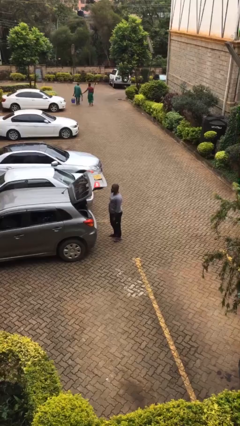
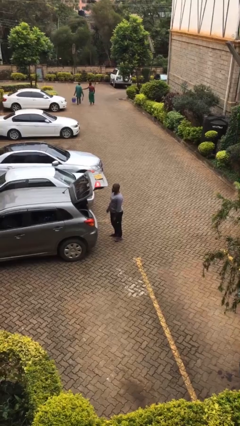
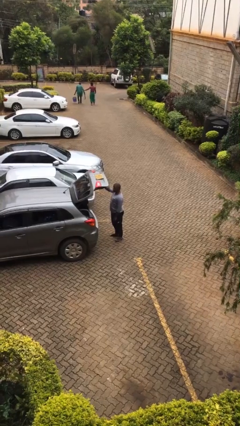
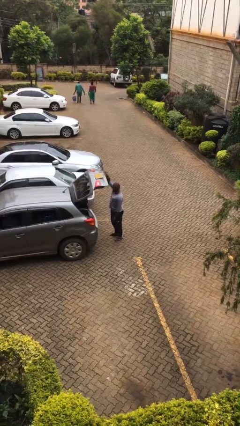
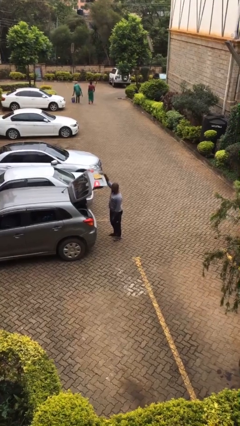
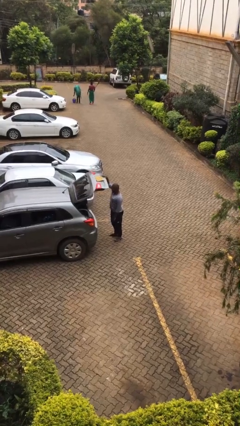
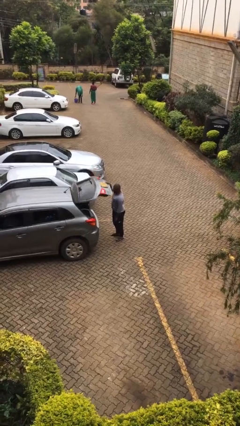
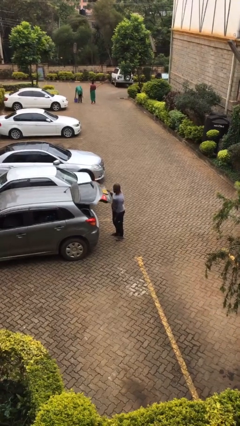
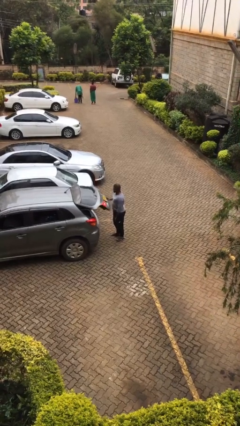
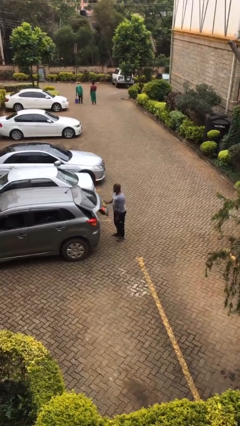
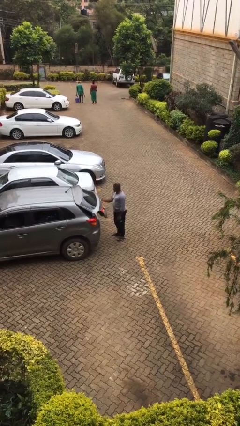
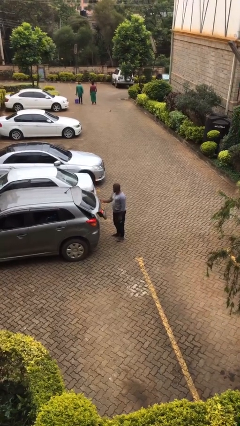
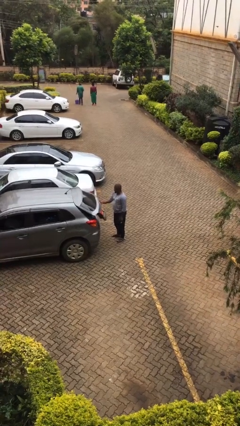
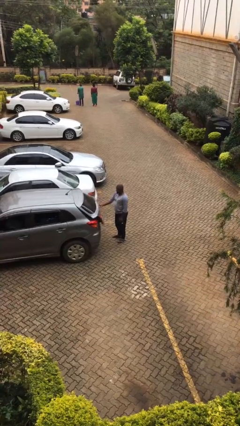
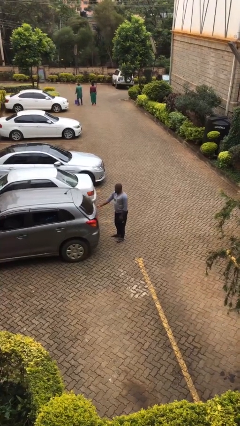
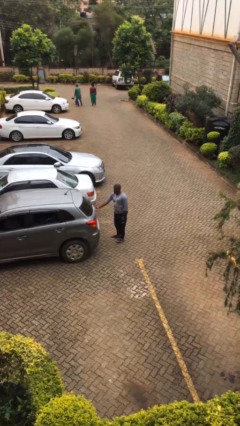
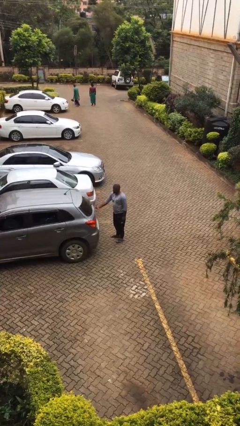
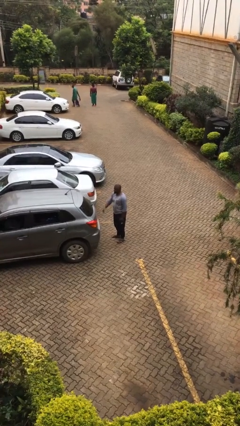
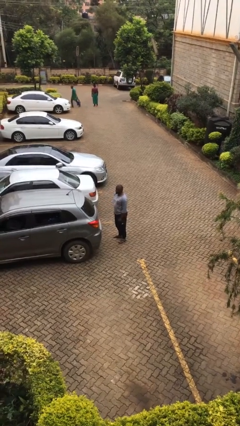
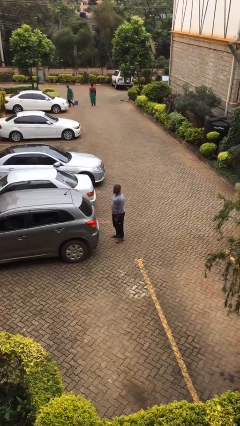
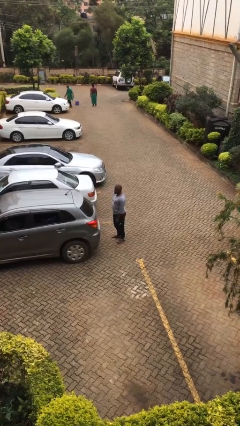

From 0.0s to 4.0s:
person closes car trunk

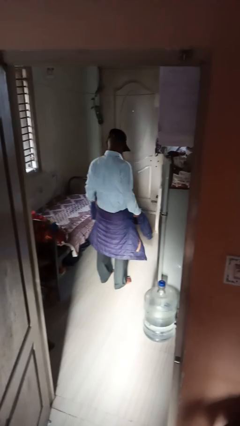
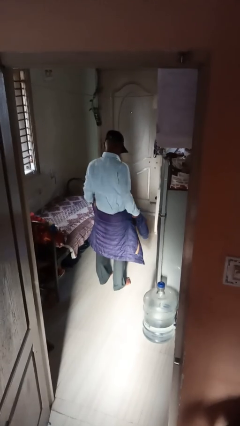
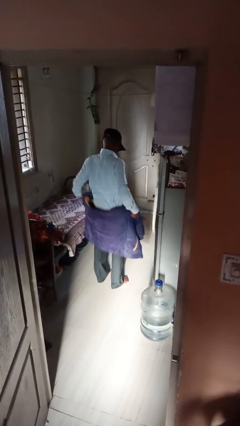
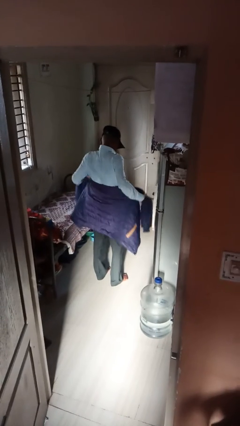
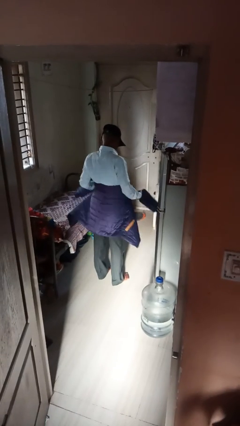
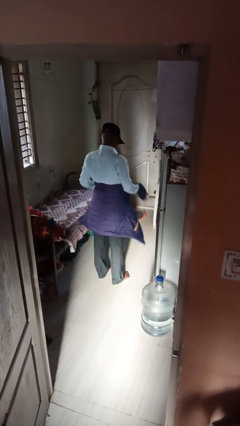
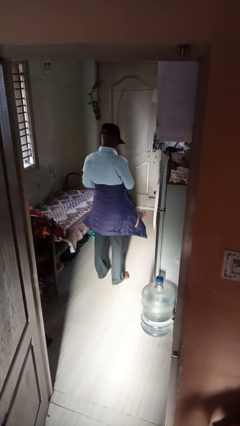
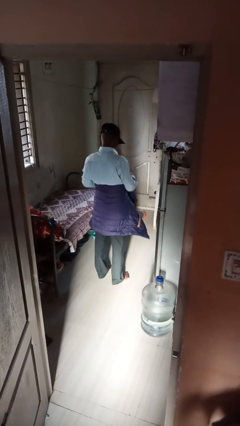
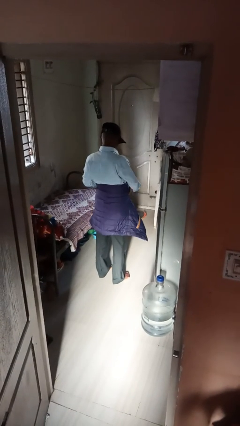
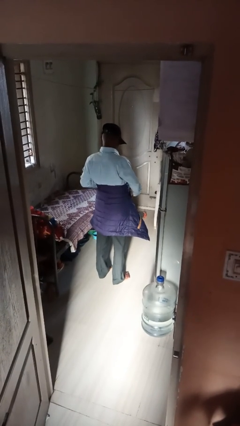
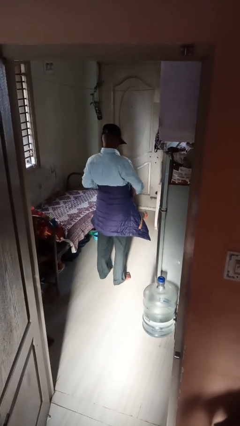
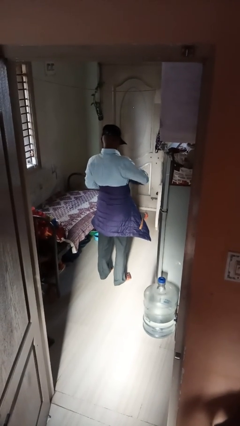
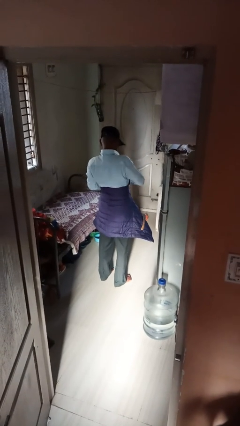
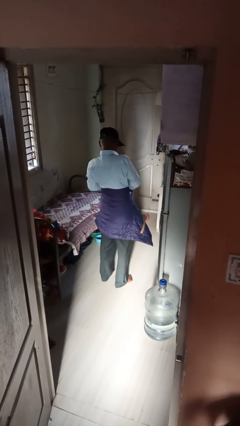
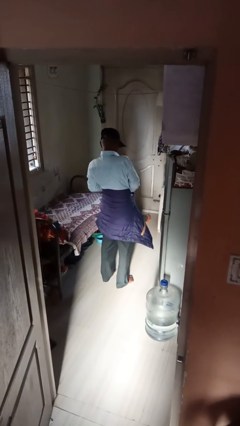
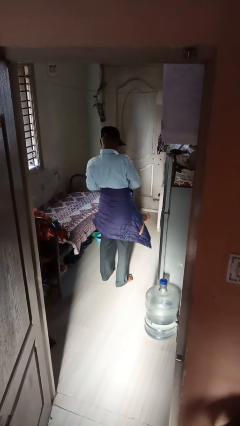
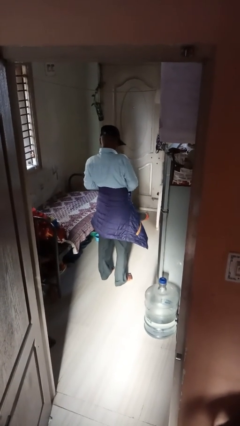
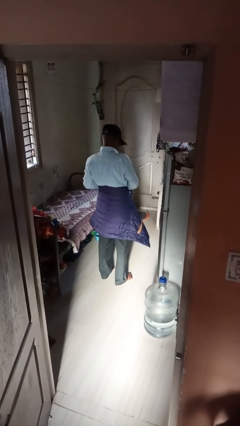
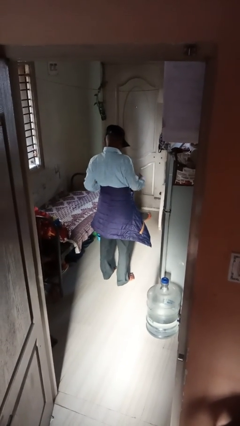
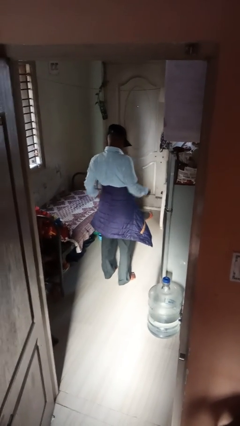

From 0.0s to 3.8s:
person ties jacket around waist

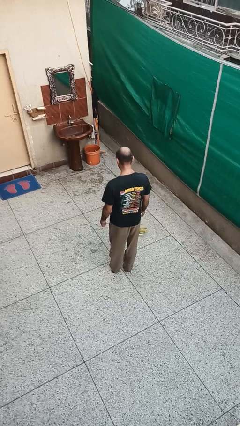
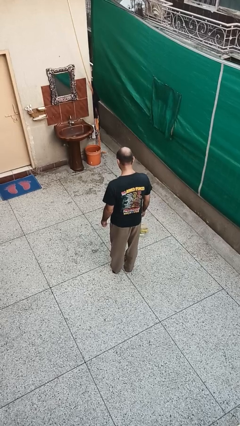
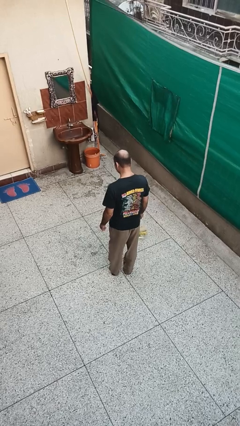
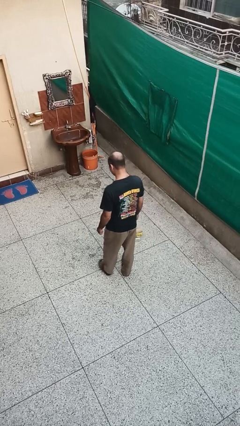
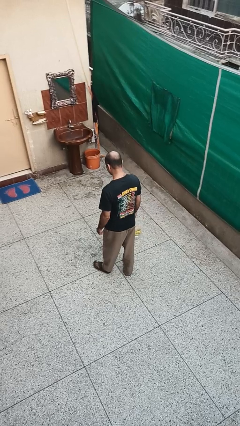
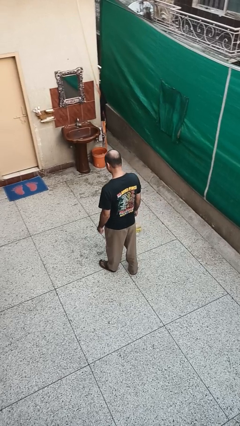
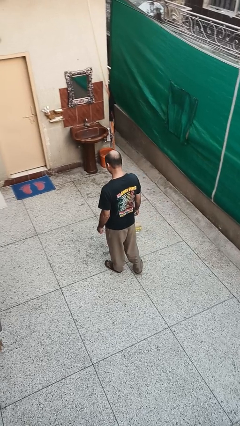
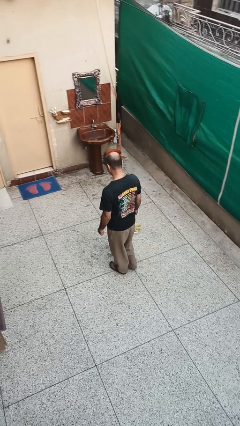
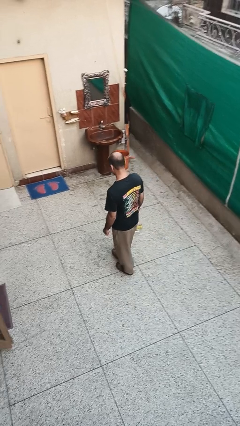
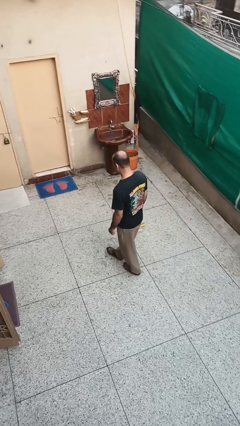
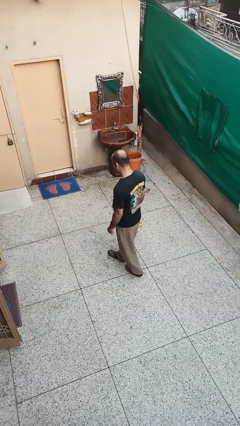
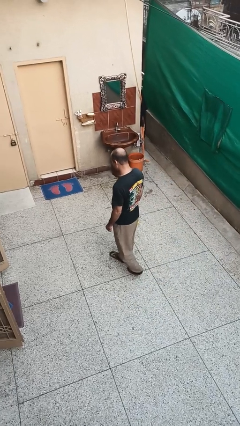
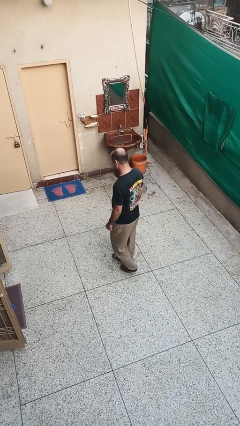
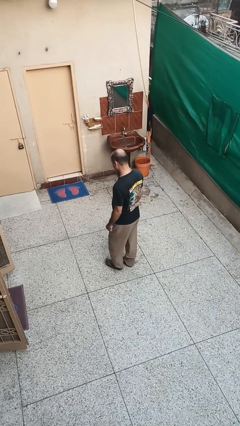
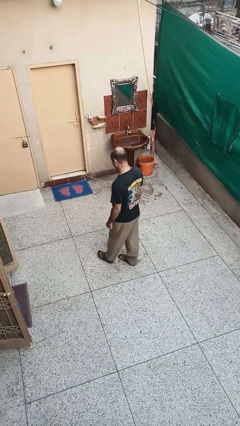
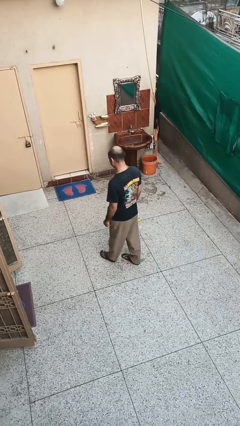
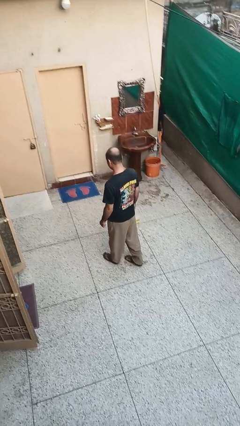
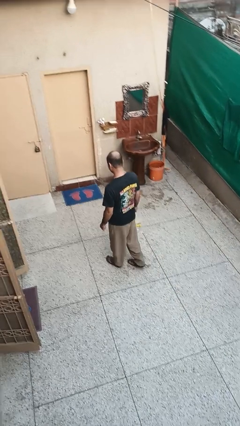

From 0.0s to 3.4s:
person carries groceries

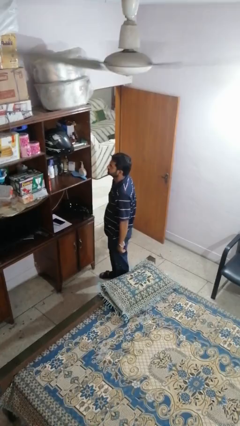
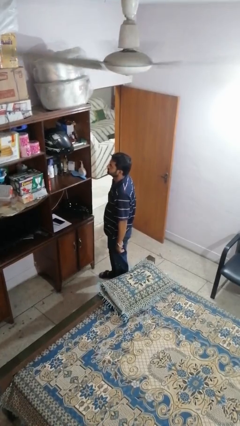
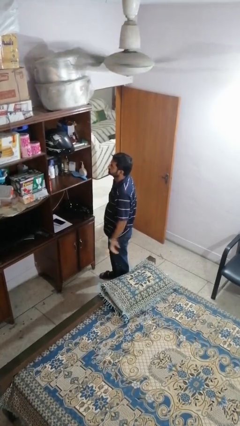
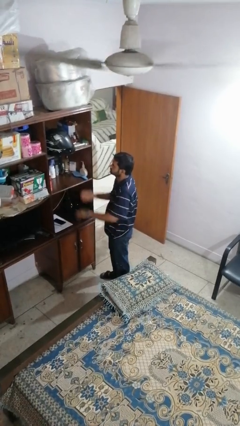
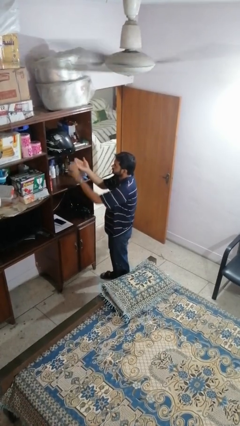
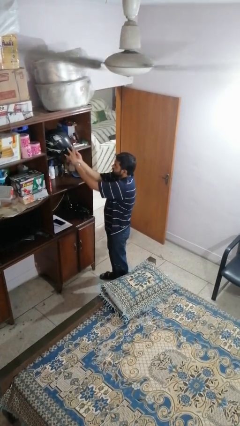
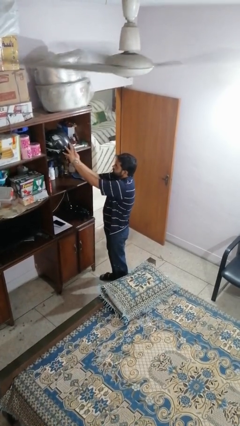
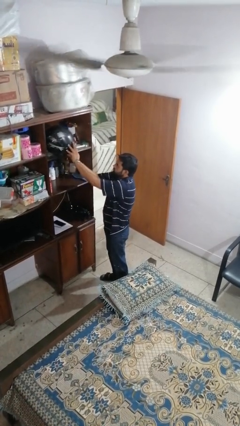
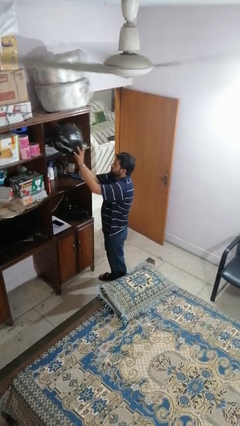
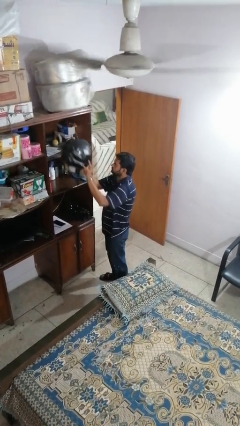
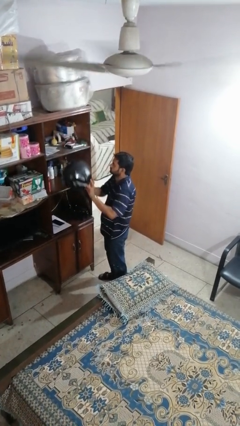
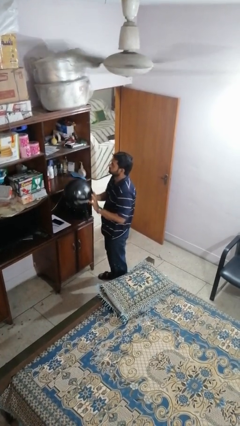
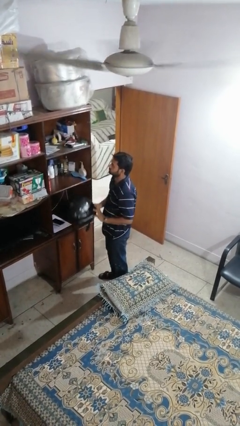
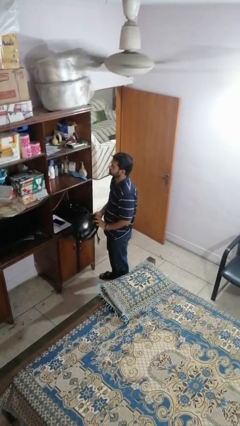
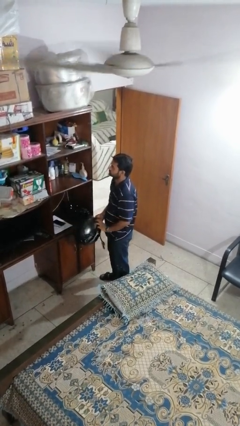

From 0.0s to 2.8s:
person picks up object from shelf

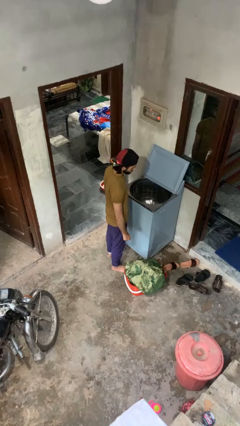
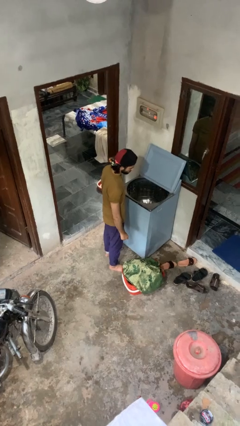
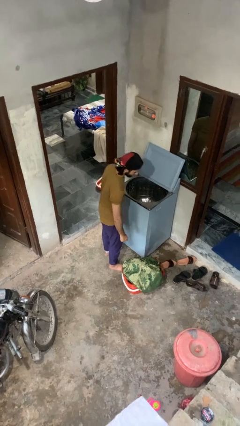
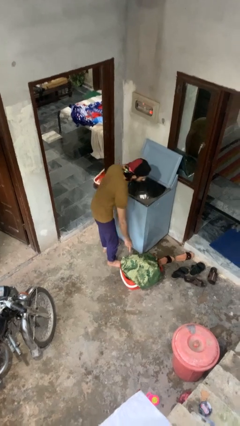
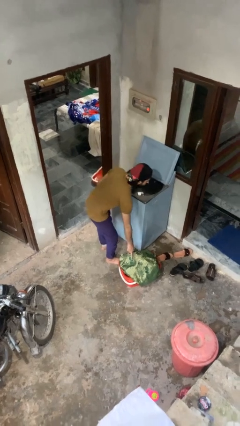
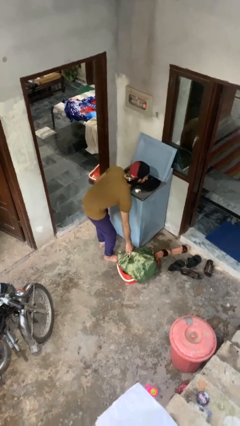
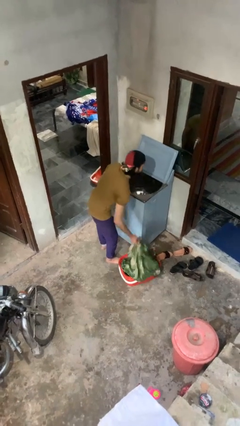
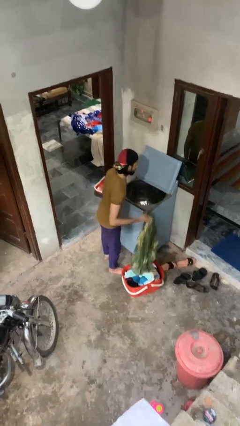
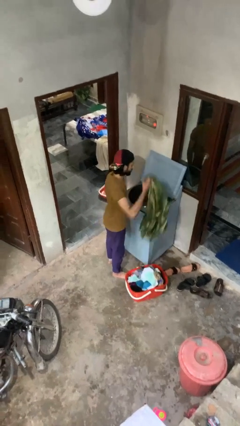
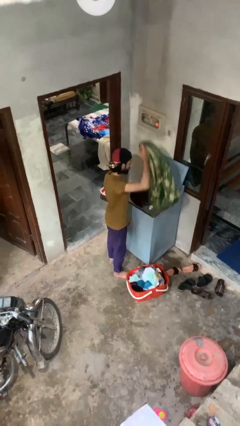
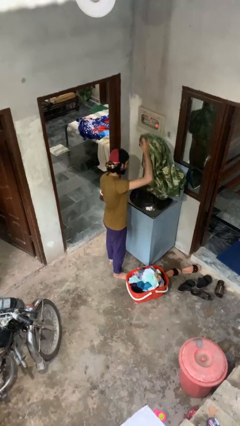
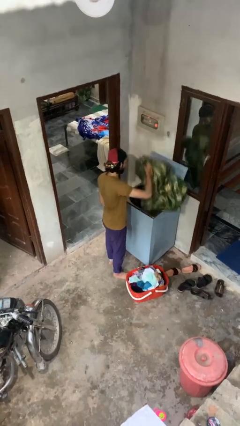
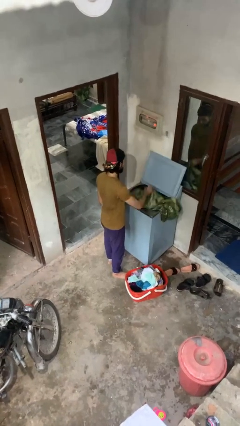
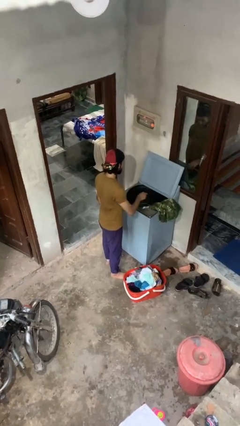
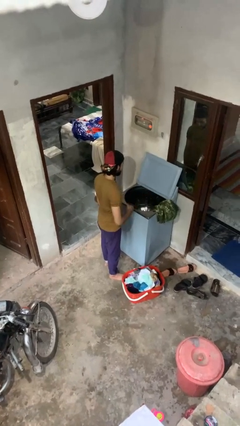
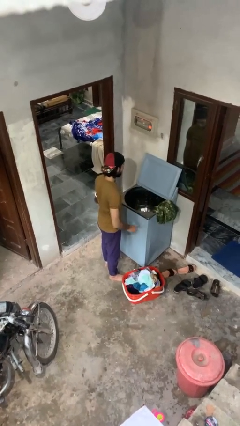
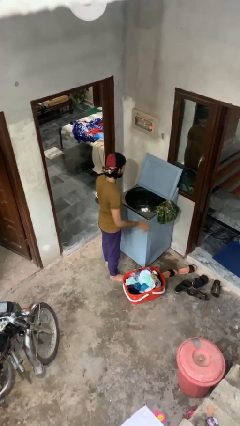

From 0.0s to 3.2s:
person loads clotheswasher
